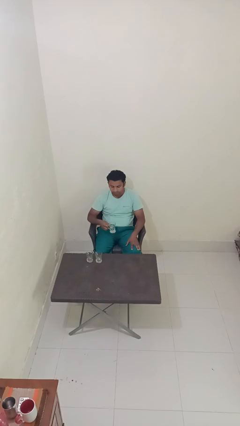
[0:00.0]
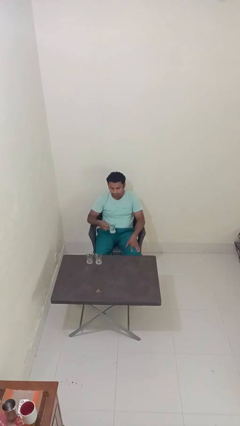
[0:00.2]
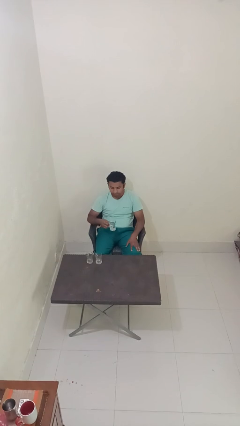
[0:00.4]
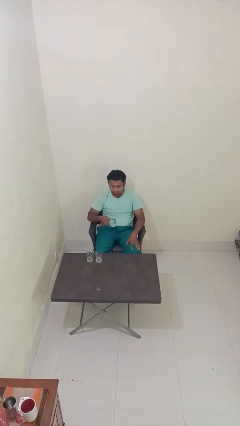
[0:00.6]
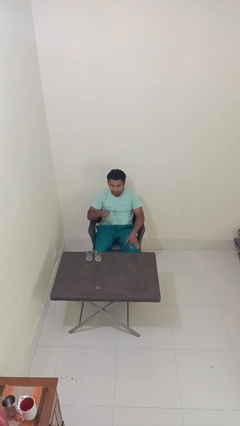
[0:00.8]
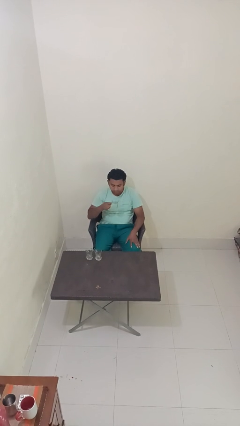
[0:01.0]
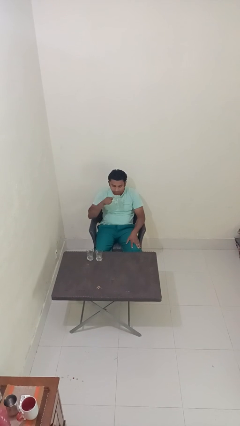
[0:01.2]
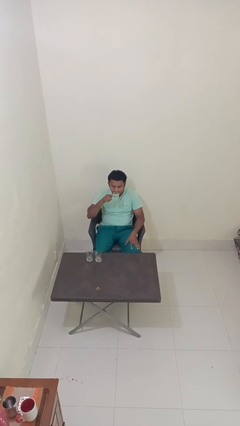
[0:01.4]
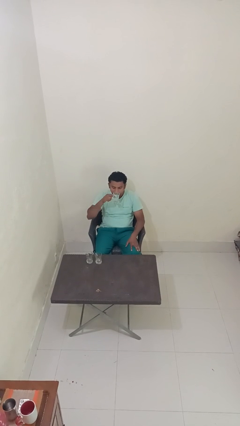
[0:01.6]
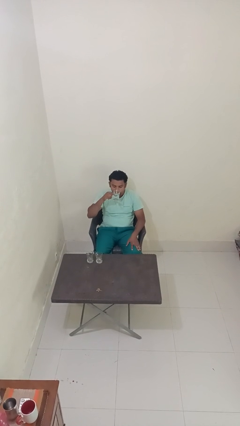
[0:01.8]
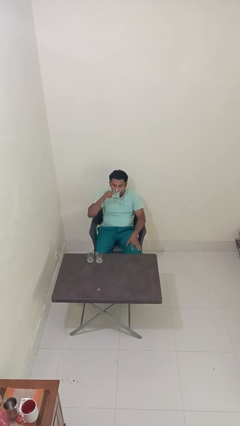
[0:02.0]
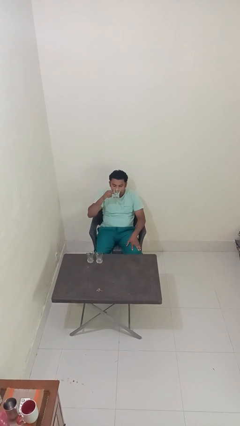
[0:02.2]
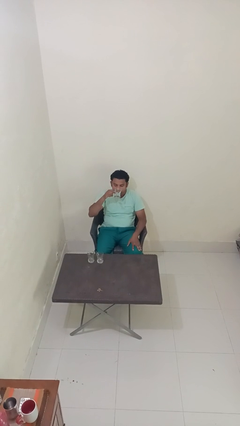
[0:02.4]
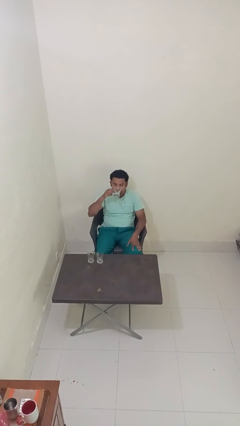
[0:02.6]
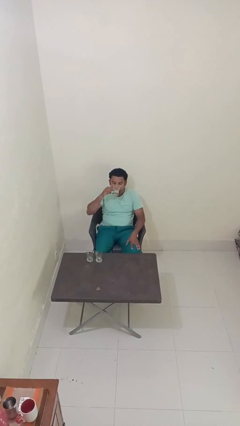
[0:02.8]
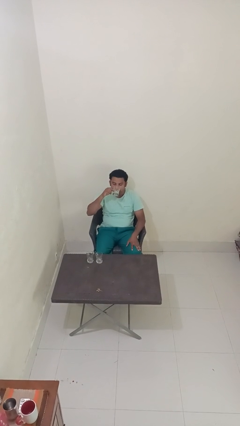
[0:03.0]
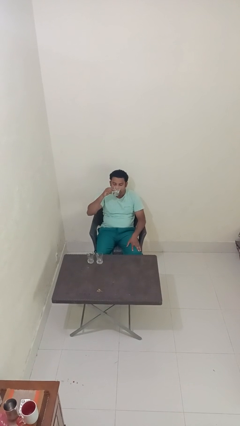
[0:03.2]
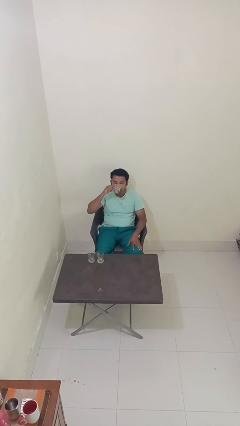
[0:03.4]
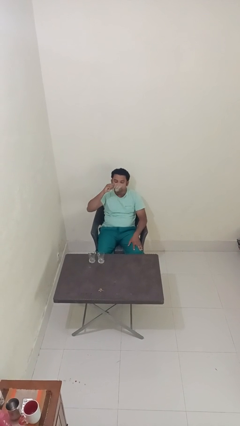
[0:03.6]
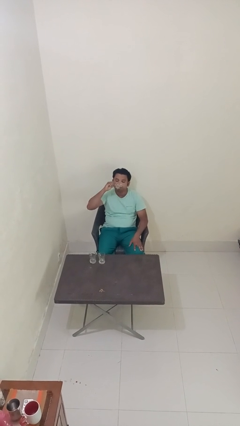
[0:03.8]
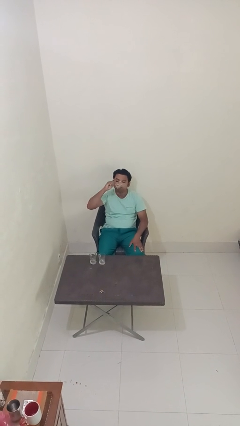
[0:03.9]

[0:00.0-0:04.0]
person drinks from shotglass

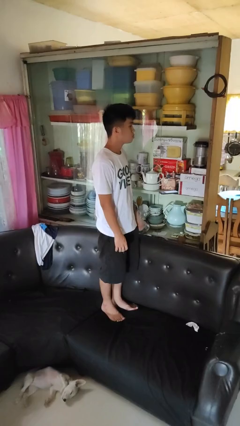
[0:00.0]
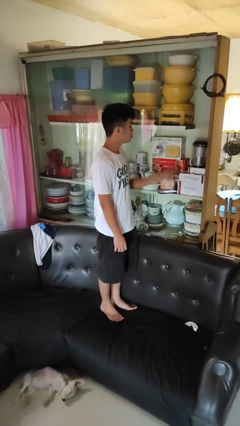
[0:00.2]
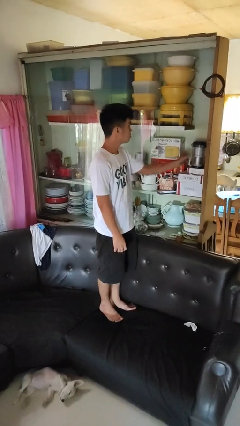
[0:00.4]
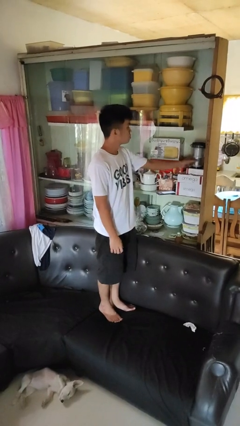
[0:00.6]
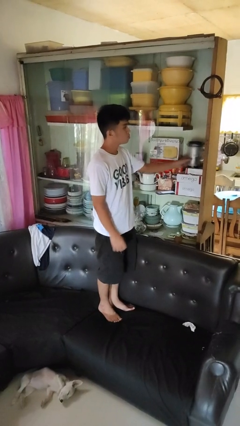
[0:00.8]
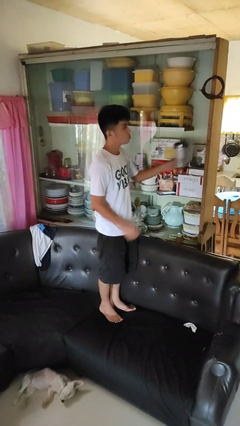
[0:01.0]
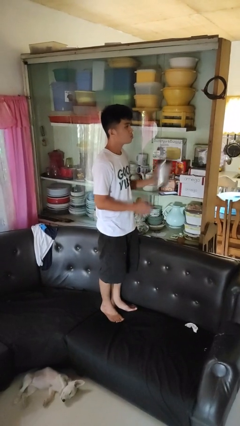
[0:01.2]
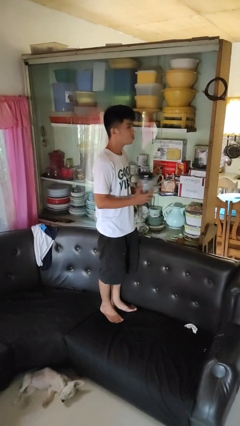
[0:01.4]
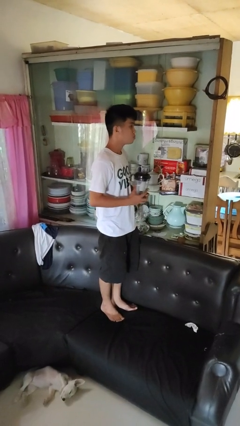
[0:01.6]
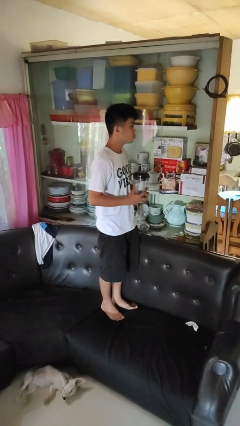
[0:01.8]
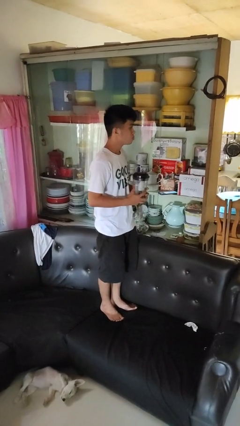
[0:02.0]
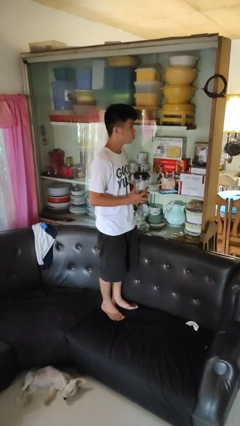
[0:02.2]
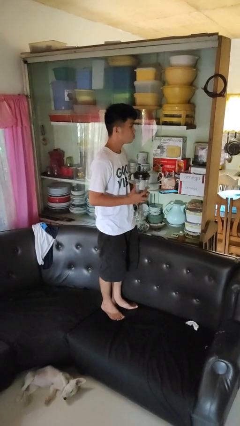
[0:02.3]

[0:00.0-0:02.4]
person picks up object from cabinet

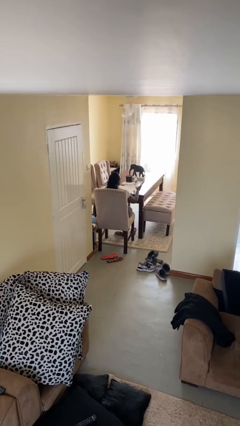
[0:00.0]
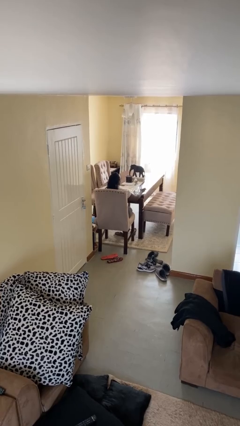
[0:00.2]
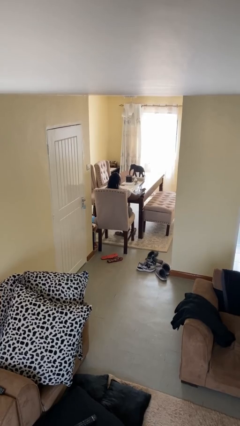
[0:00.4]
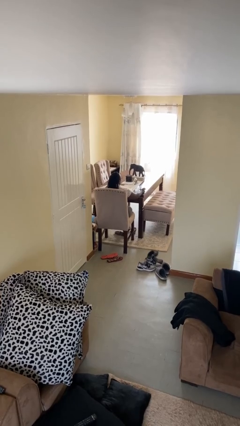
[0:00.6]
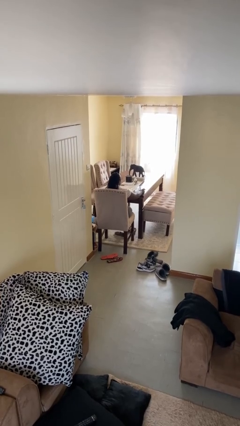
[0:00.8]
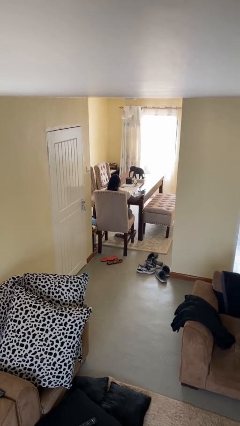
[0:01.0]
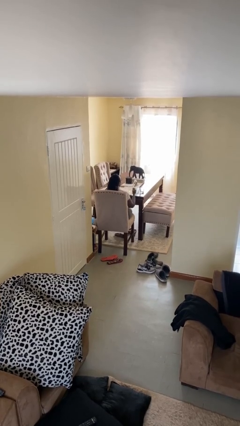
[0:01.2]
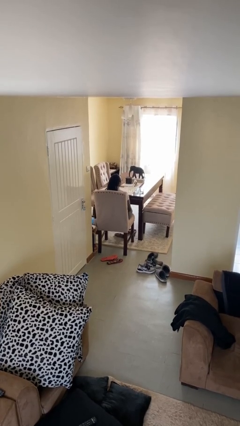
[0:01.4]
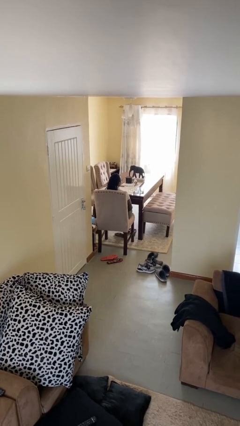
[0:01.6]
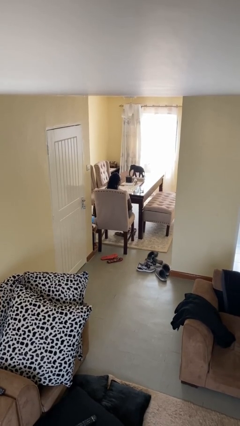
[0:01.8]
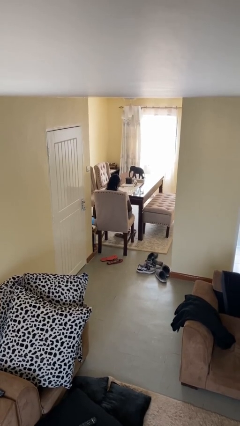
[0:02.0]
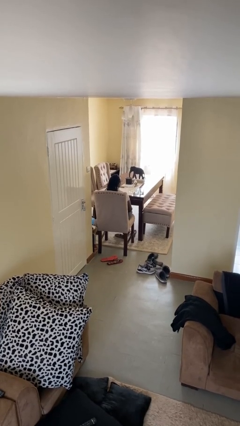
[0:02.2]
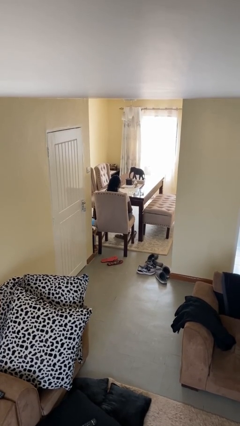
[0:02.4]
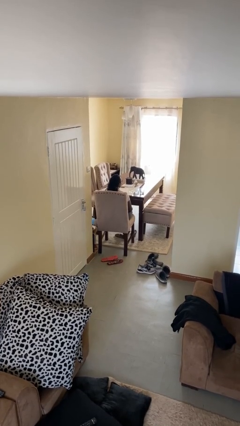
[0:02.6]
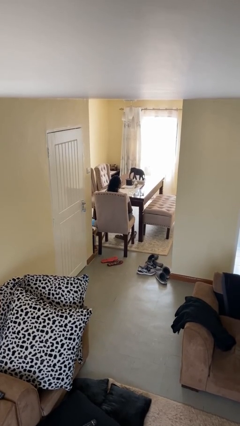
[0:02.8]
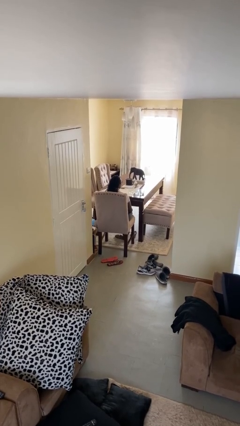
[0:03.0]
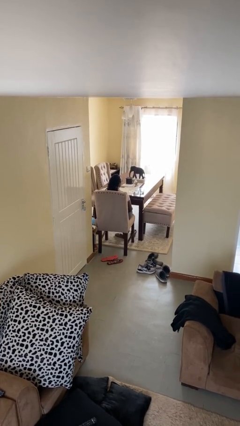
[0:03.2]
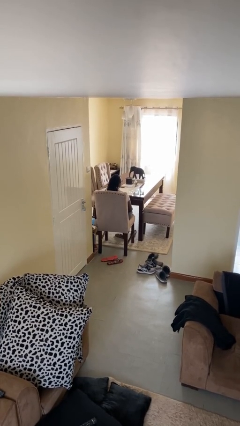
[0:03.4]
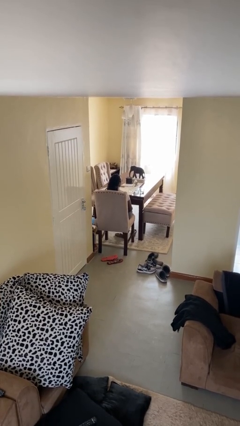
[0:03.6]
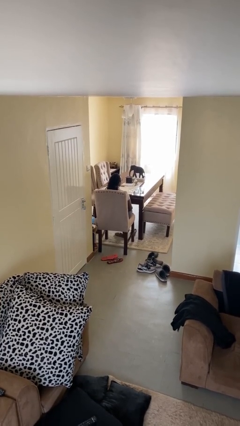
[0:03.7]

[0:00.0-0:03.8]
person puts down object on table

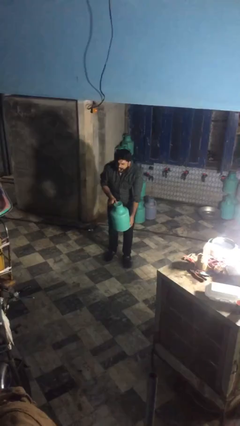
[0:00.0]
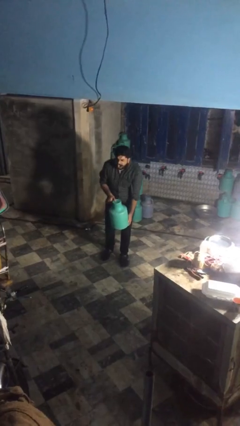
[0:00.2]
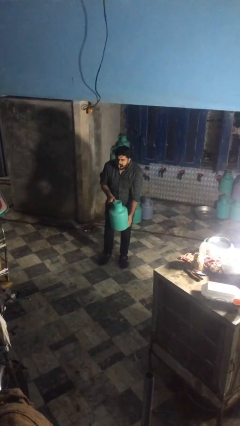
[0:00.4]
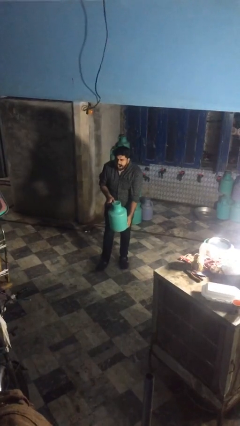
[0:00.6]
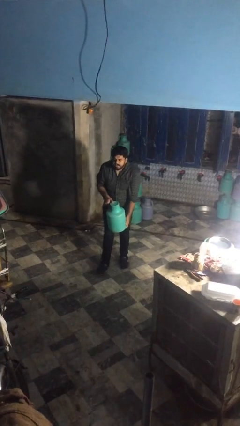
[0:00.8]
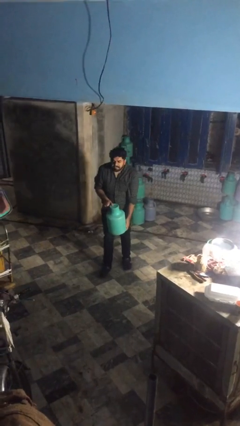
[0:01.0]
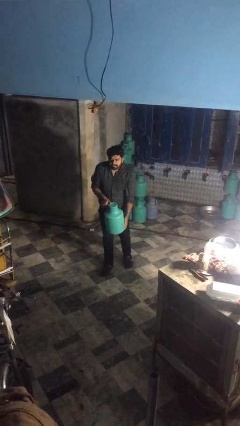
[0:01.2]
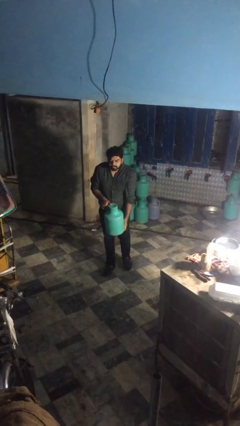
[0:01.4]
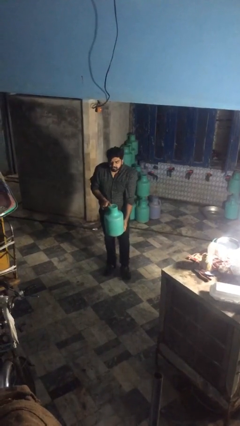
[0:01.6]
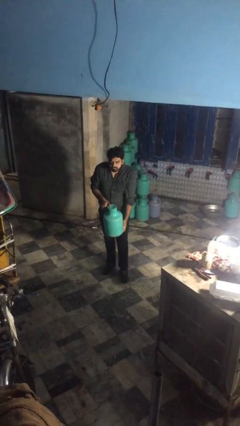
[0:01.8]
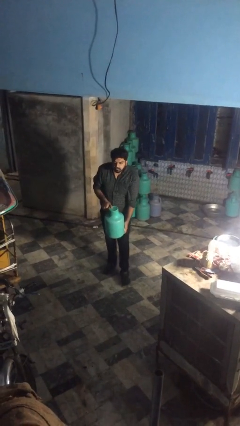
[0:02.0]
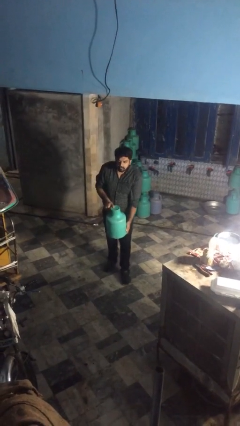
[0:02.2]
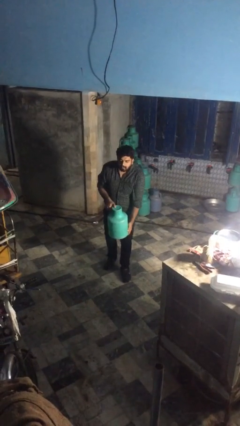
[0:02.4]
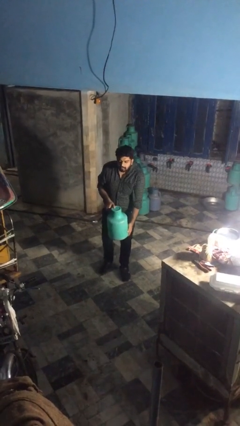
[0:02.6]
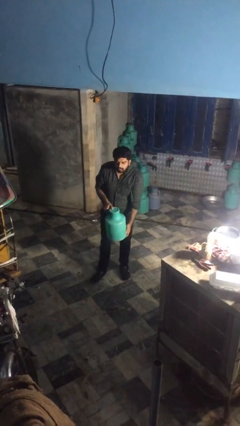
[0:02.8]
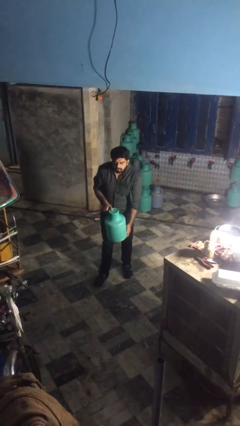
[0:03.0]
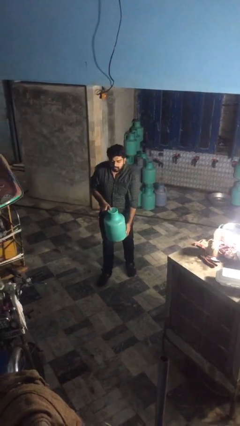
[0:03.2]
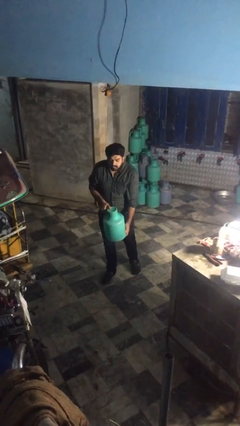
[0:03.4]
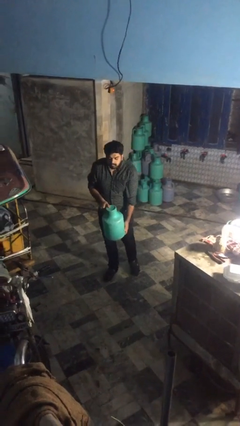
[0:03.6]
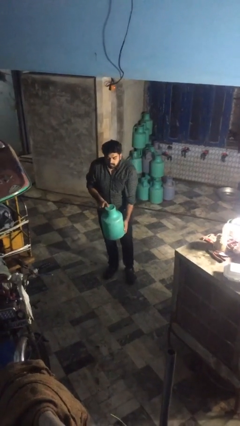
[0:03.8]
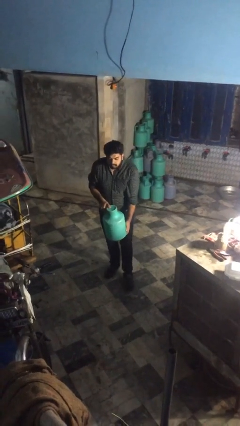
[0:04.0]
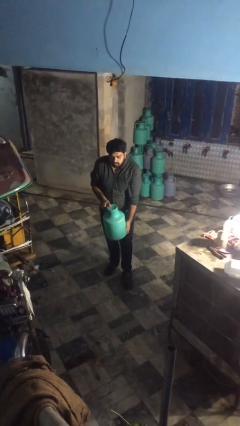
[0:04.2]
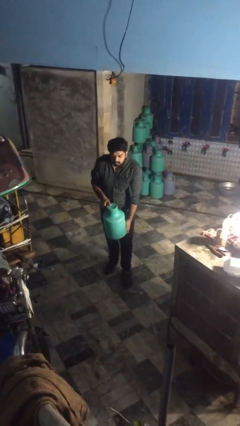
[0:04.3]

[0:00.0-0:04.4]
person carries heavy object

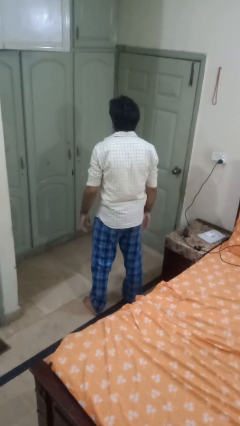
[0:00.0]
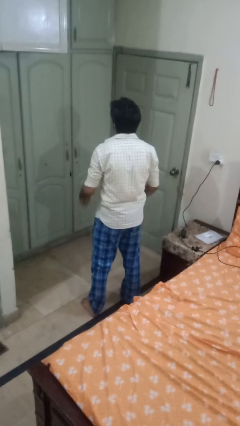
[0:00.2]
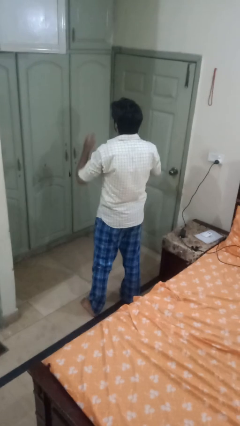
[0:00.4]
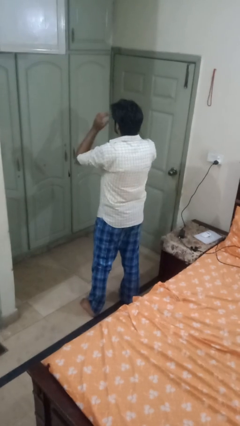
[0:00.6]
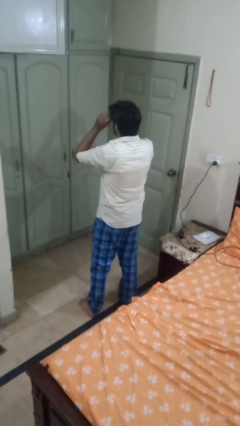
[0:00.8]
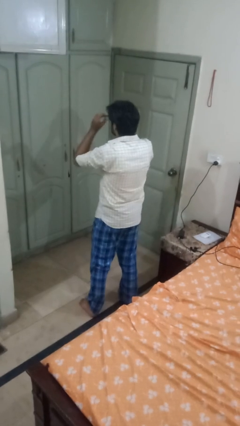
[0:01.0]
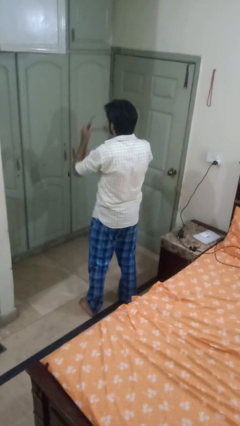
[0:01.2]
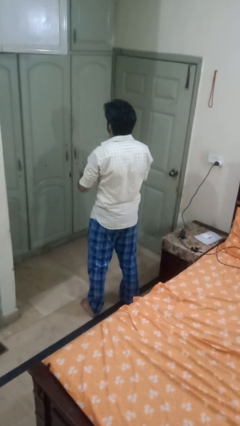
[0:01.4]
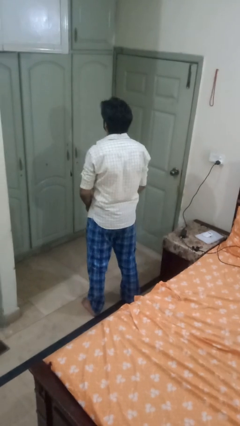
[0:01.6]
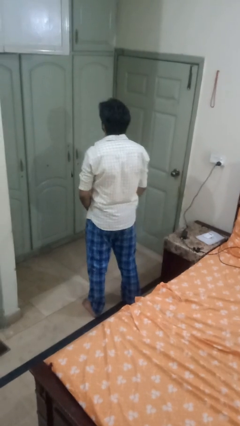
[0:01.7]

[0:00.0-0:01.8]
person takes off glasses

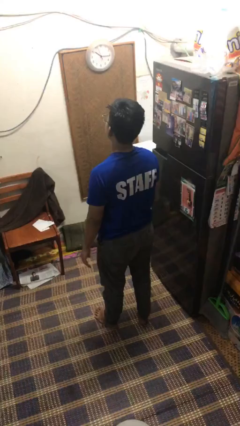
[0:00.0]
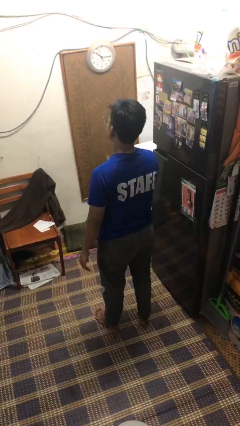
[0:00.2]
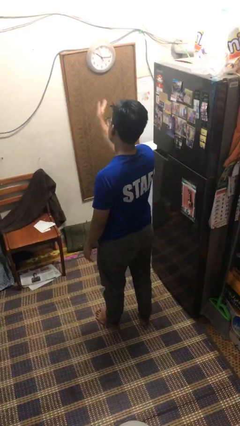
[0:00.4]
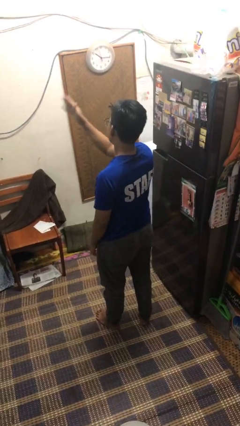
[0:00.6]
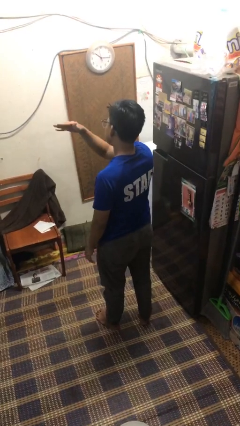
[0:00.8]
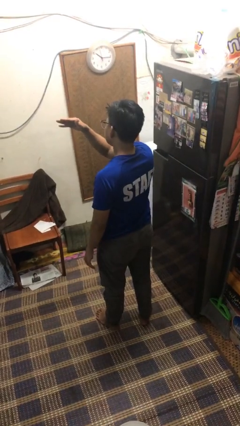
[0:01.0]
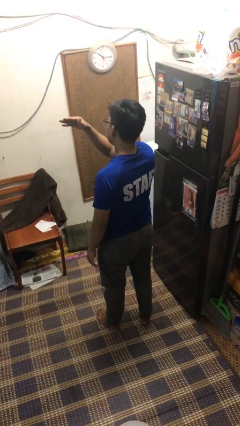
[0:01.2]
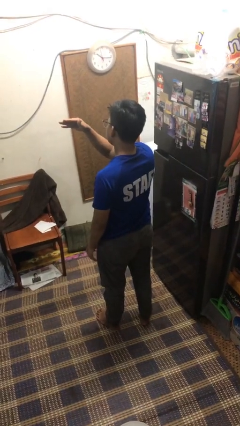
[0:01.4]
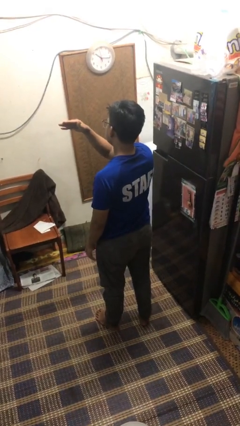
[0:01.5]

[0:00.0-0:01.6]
person gestures swipe left
